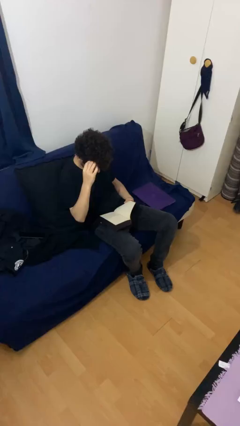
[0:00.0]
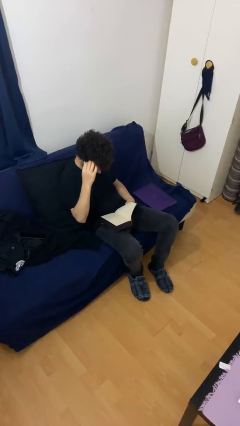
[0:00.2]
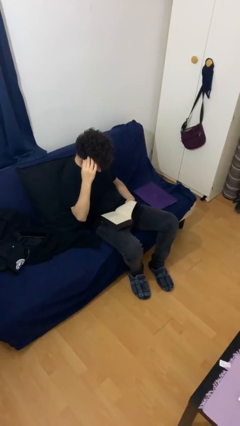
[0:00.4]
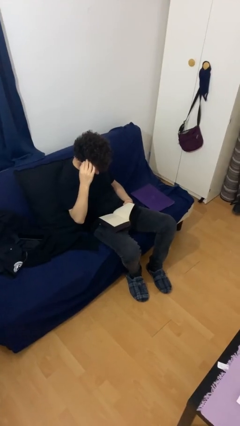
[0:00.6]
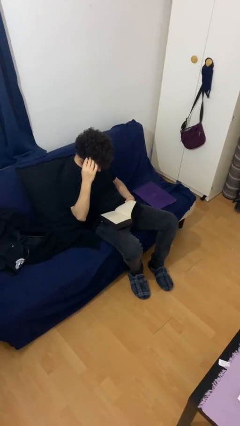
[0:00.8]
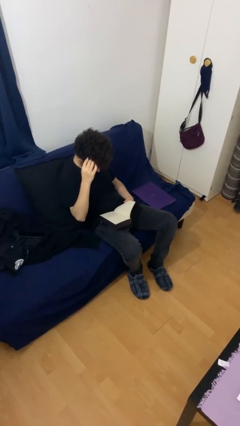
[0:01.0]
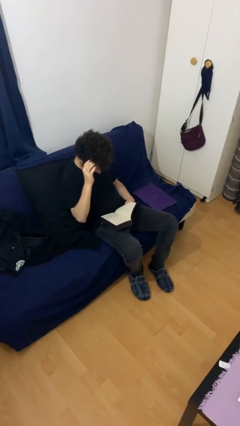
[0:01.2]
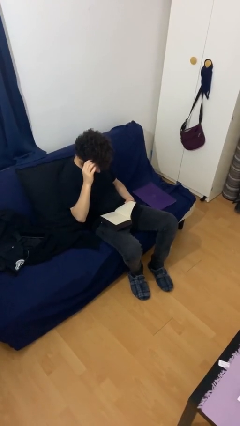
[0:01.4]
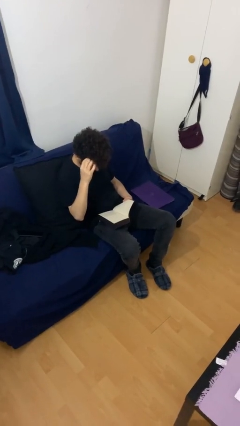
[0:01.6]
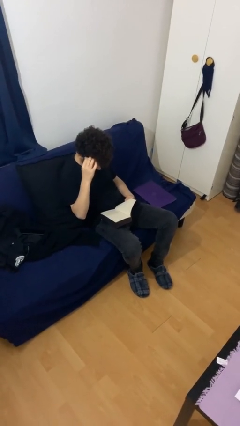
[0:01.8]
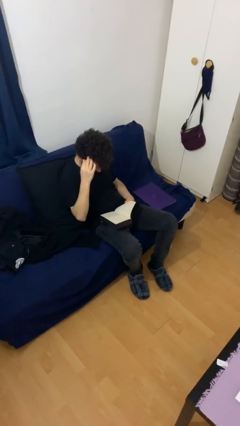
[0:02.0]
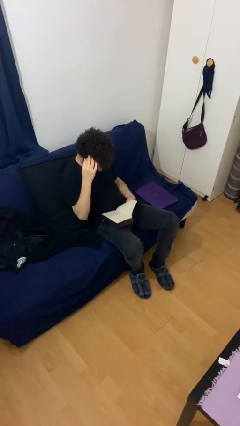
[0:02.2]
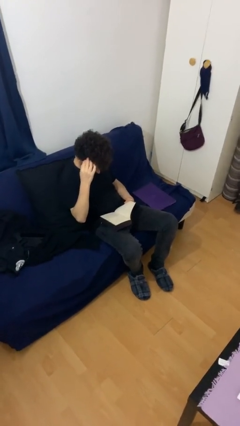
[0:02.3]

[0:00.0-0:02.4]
person reads document

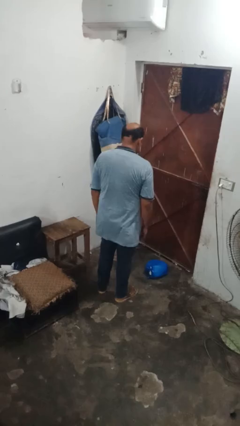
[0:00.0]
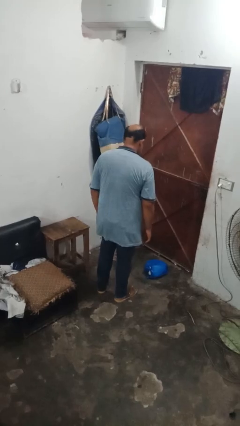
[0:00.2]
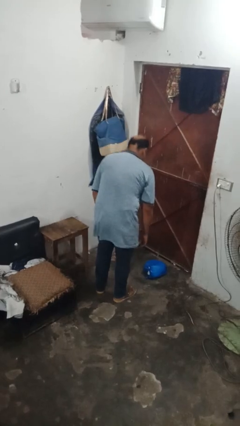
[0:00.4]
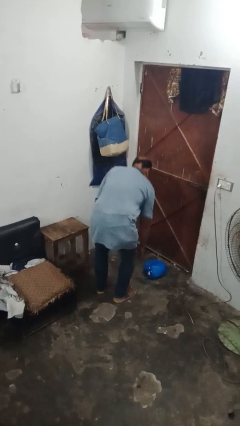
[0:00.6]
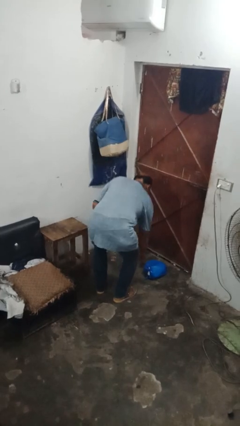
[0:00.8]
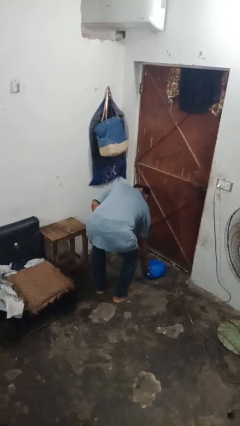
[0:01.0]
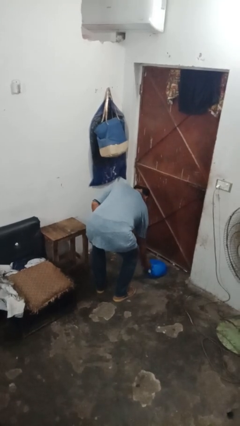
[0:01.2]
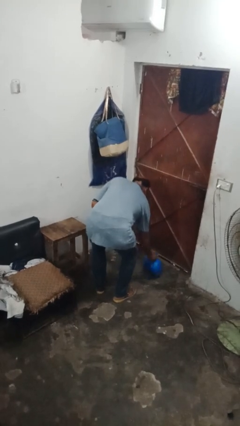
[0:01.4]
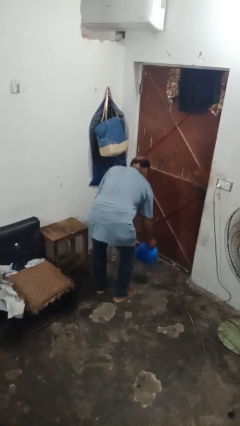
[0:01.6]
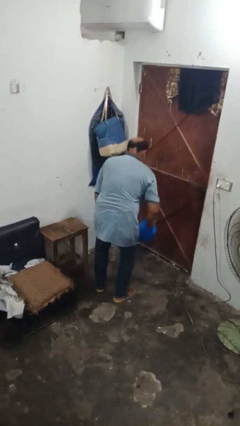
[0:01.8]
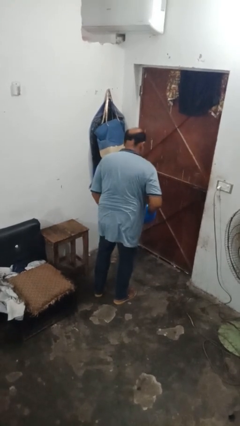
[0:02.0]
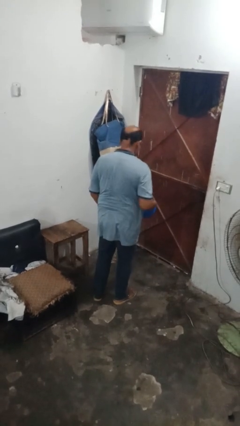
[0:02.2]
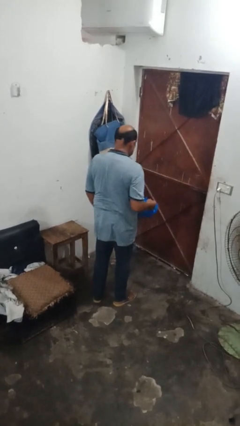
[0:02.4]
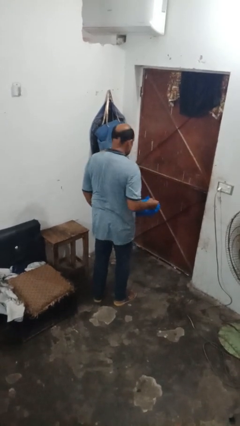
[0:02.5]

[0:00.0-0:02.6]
person picks up object from floor

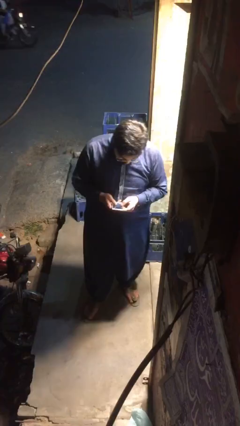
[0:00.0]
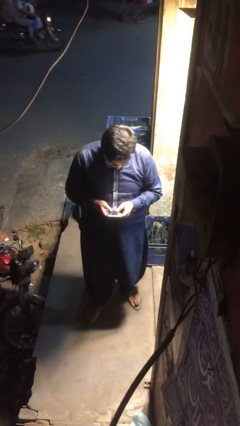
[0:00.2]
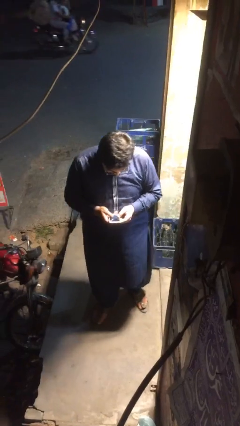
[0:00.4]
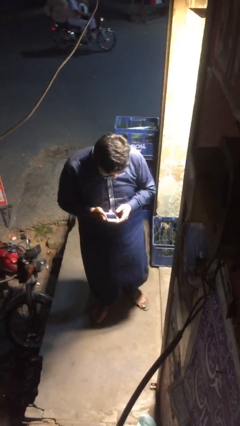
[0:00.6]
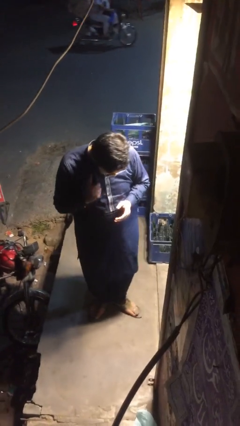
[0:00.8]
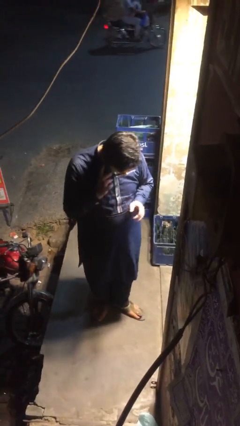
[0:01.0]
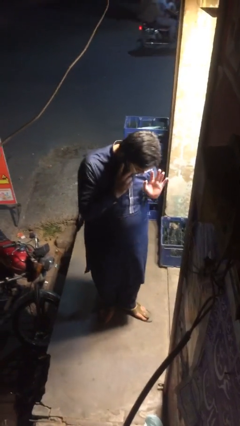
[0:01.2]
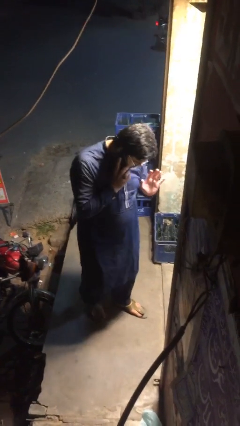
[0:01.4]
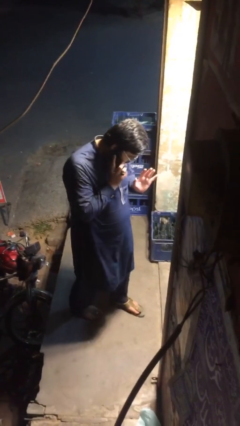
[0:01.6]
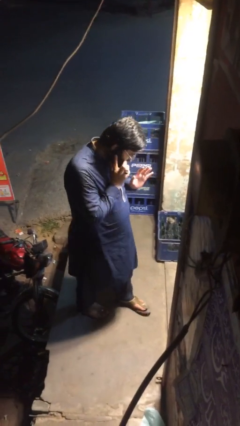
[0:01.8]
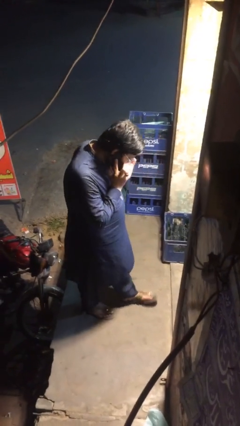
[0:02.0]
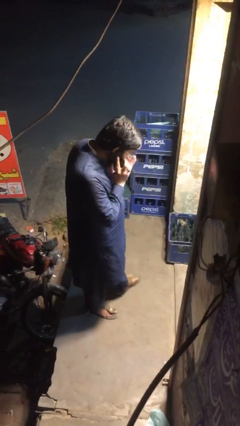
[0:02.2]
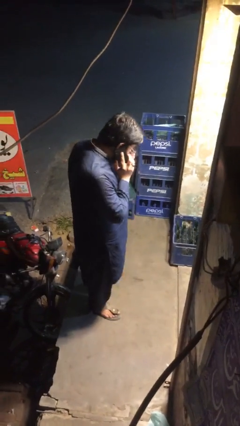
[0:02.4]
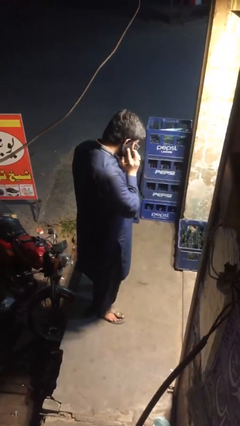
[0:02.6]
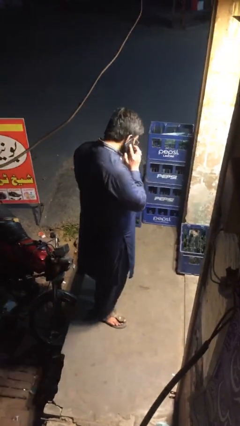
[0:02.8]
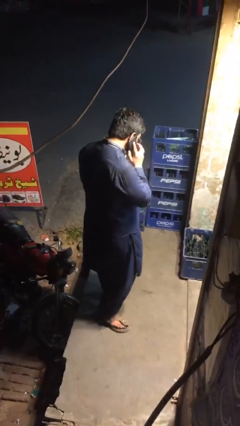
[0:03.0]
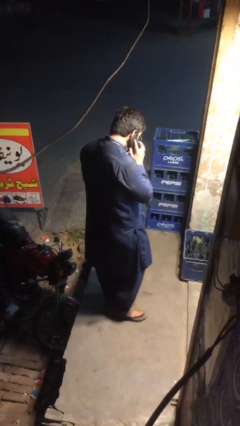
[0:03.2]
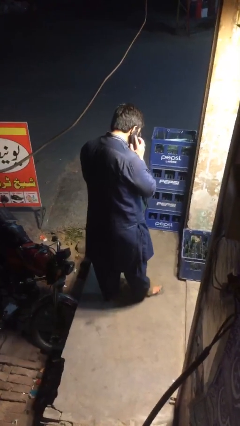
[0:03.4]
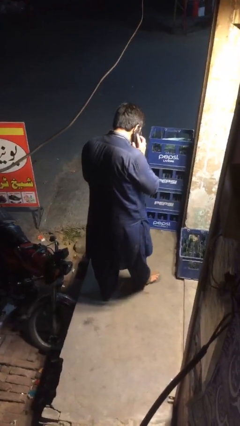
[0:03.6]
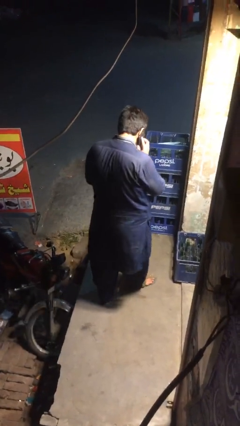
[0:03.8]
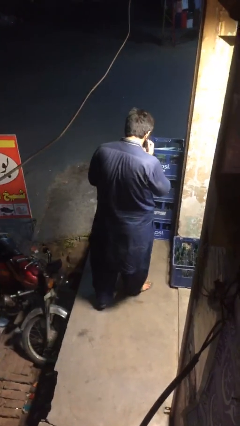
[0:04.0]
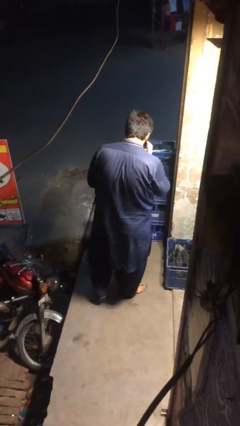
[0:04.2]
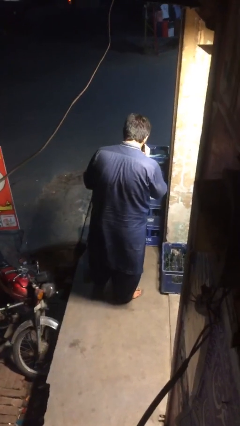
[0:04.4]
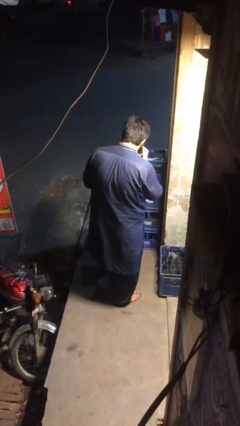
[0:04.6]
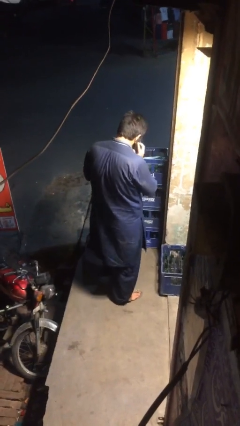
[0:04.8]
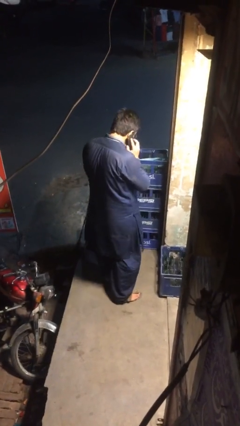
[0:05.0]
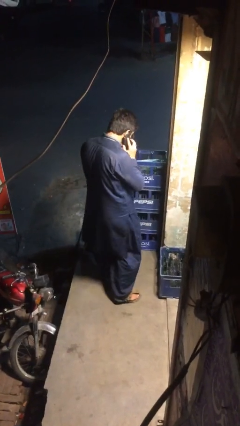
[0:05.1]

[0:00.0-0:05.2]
person talks on phone

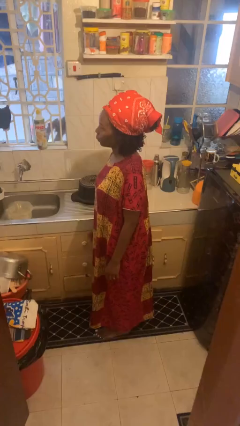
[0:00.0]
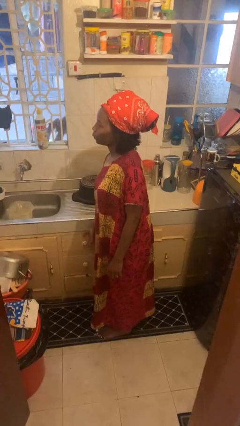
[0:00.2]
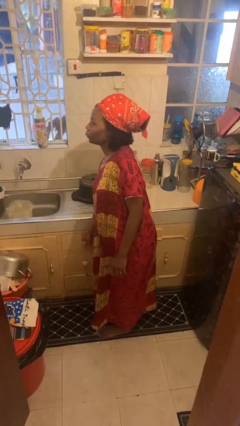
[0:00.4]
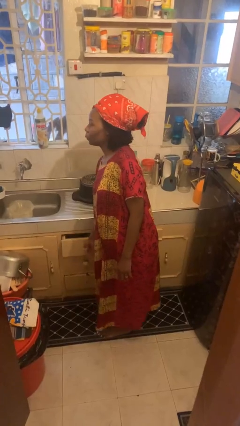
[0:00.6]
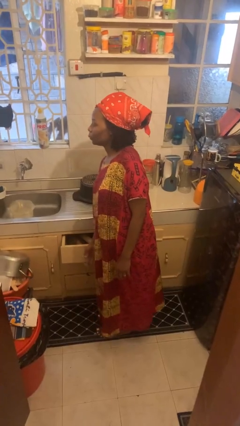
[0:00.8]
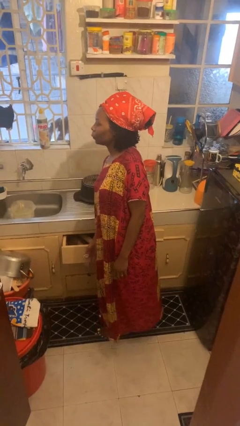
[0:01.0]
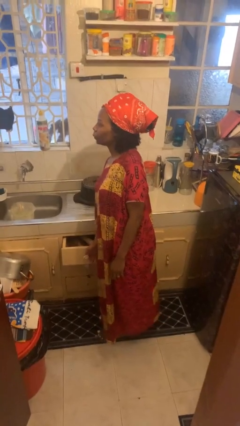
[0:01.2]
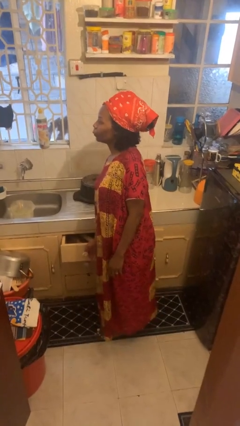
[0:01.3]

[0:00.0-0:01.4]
person opens kitchen drawer

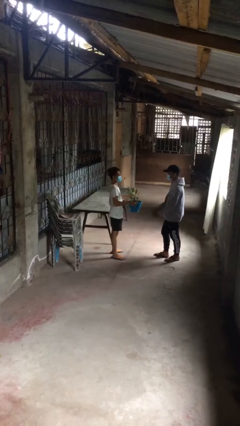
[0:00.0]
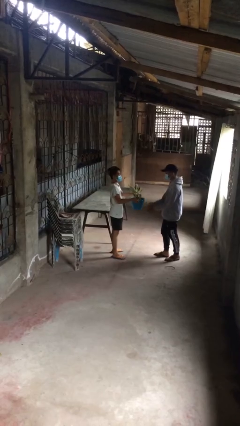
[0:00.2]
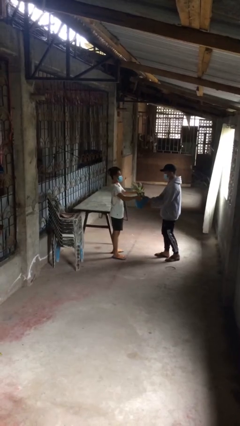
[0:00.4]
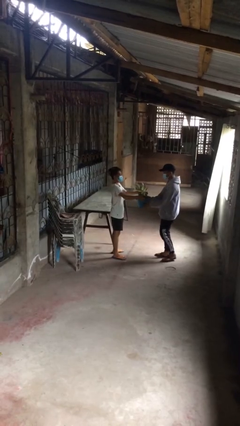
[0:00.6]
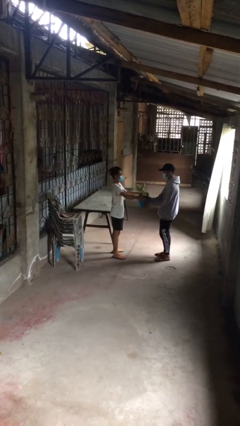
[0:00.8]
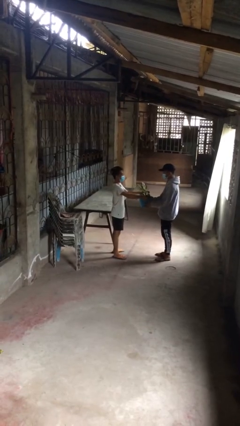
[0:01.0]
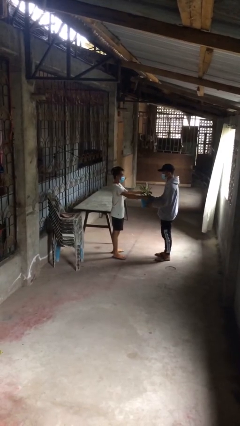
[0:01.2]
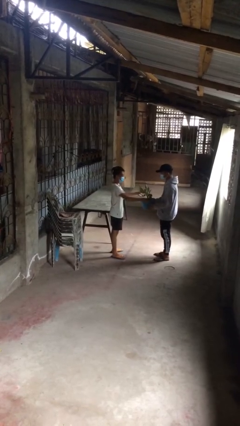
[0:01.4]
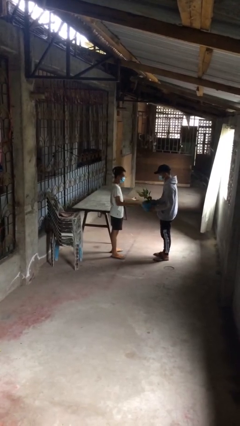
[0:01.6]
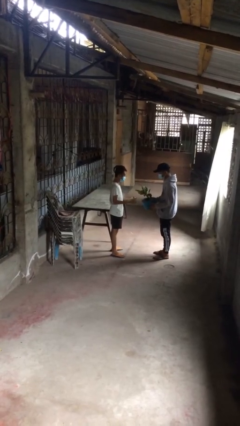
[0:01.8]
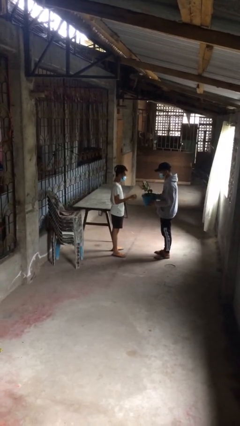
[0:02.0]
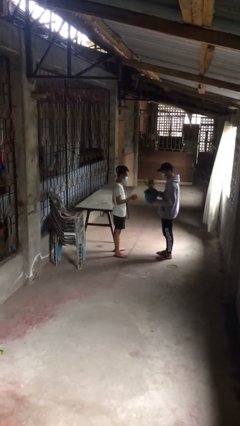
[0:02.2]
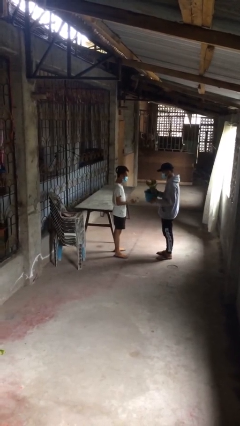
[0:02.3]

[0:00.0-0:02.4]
person transfers object to person

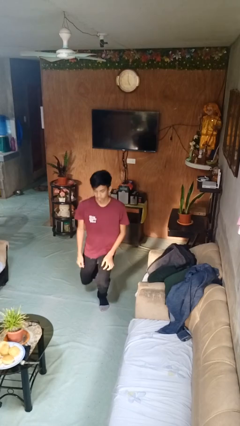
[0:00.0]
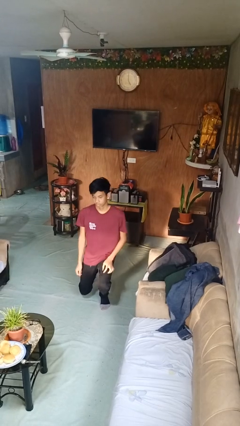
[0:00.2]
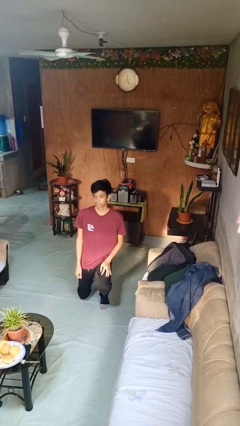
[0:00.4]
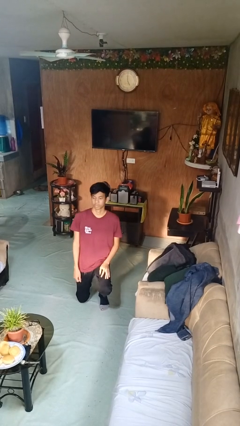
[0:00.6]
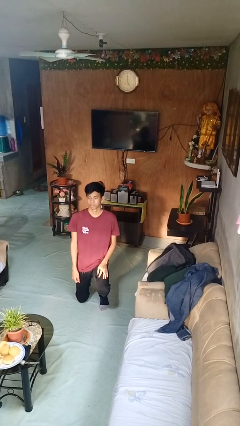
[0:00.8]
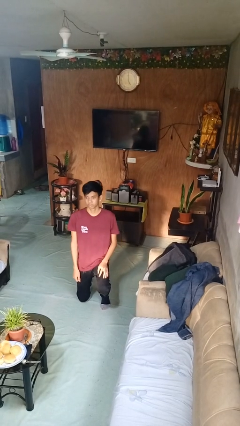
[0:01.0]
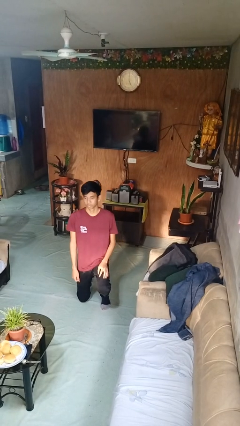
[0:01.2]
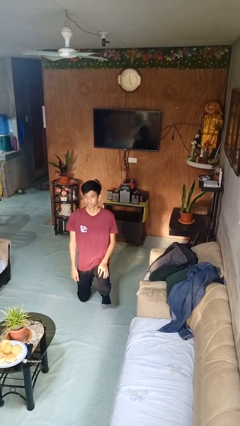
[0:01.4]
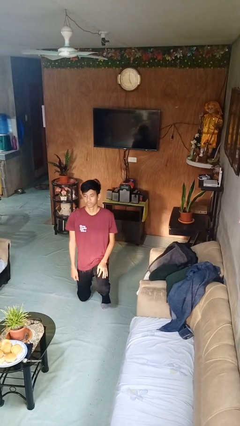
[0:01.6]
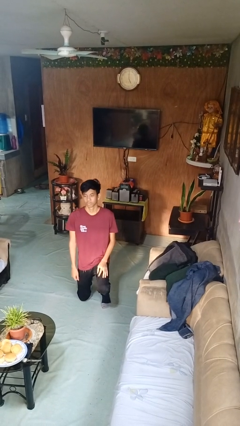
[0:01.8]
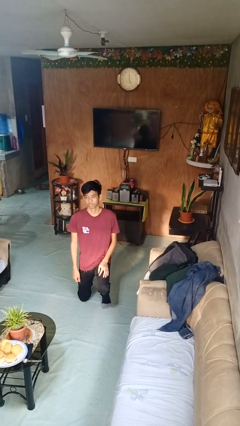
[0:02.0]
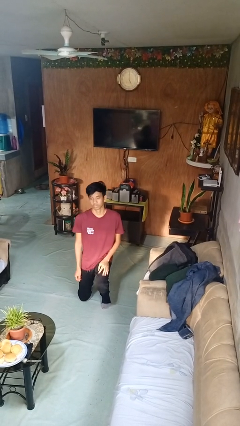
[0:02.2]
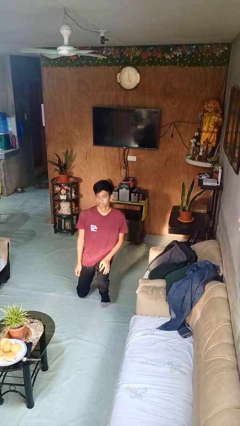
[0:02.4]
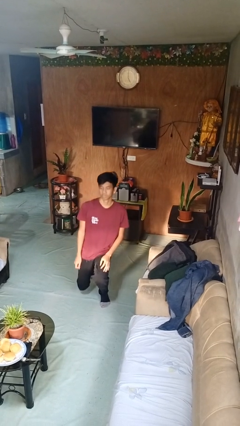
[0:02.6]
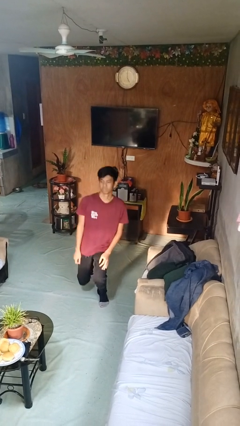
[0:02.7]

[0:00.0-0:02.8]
person kneels

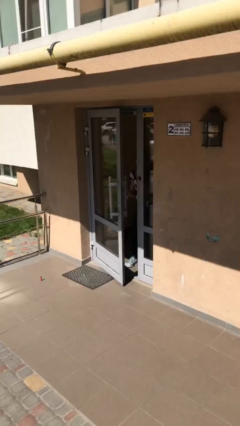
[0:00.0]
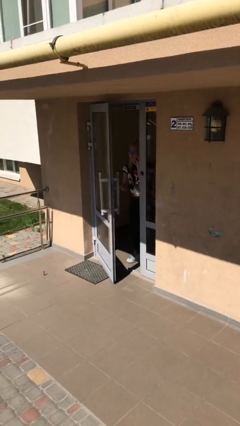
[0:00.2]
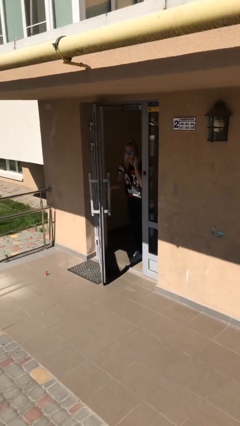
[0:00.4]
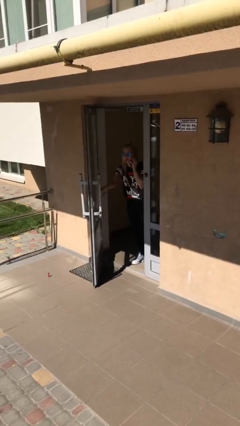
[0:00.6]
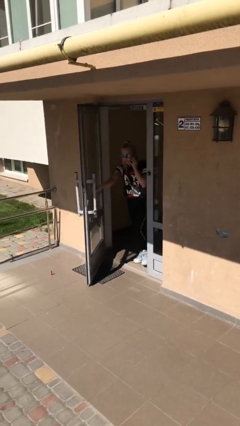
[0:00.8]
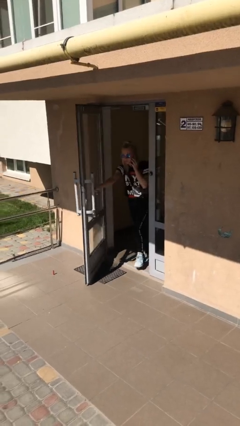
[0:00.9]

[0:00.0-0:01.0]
person opens facility door
